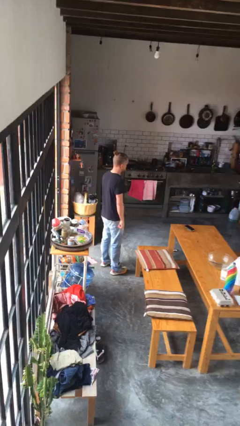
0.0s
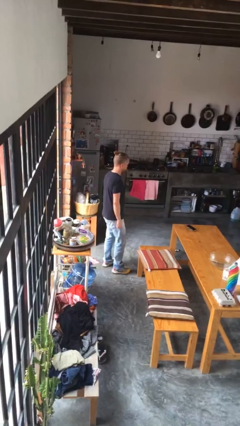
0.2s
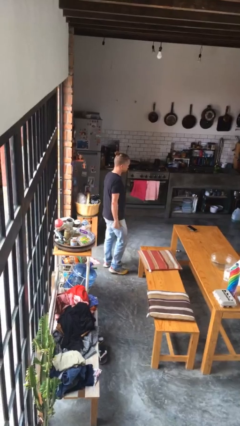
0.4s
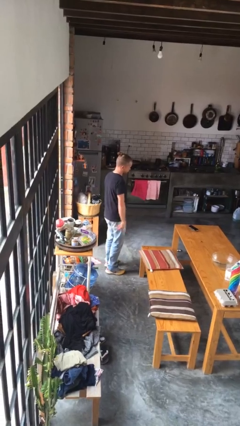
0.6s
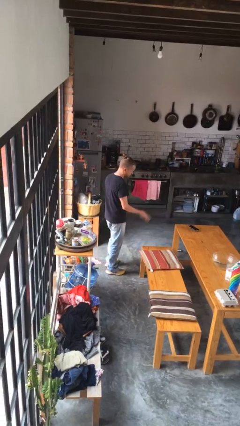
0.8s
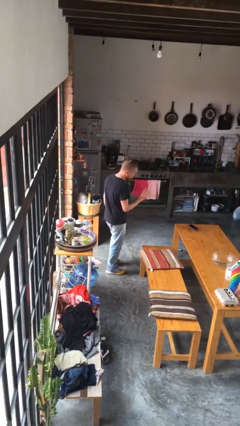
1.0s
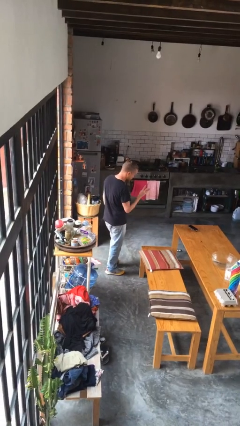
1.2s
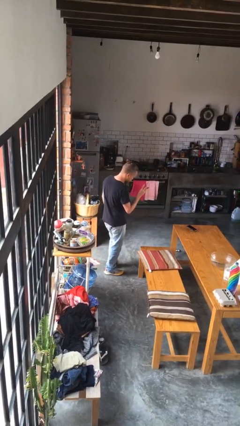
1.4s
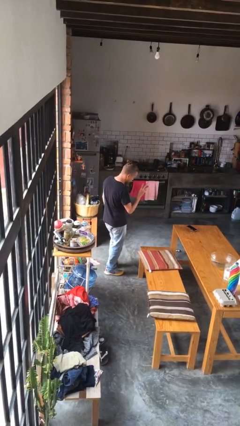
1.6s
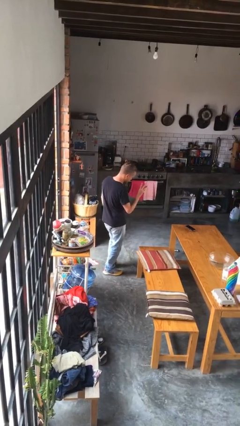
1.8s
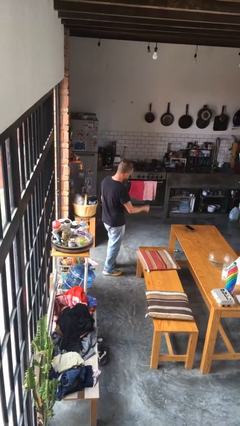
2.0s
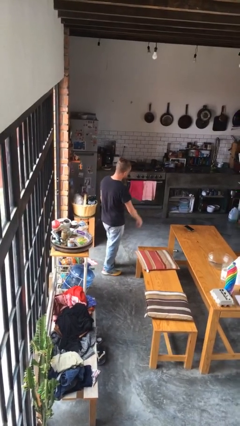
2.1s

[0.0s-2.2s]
person gestures number three

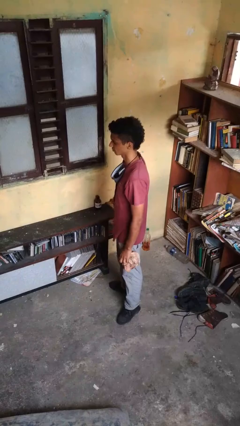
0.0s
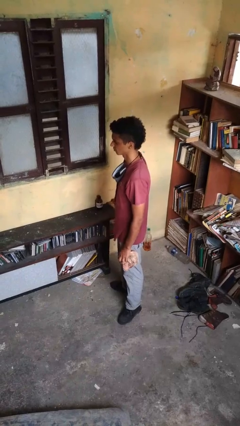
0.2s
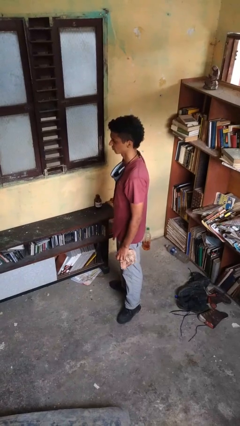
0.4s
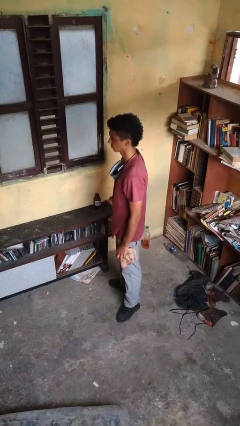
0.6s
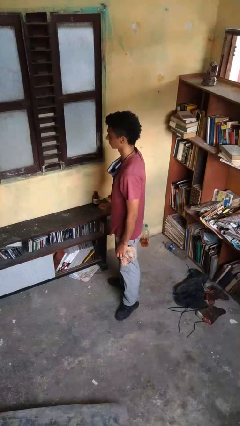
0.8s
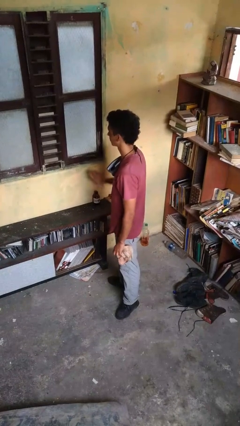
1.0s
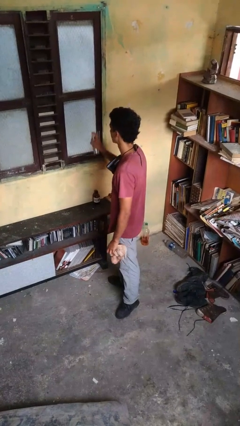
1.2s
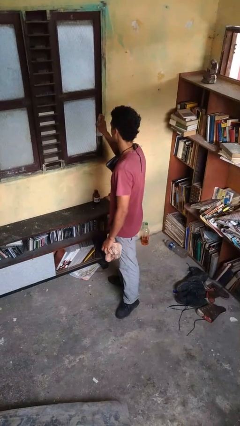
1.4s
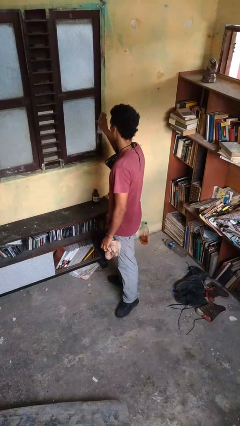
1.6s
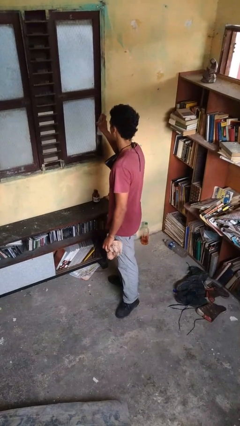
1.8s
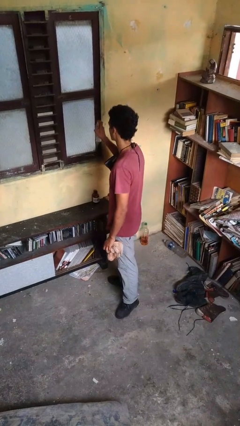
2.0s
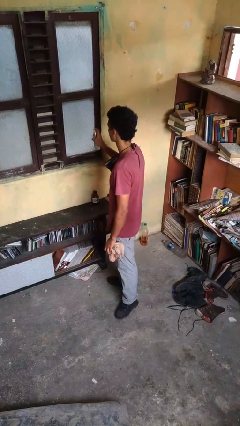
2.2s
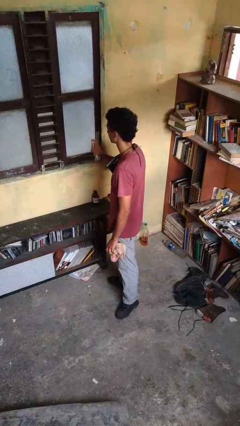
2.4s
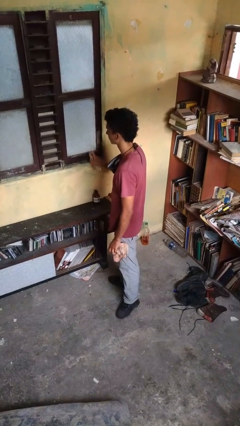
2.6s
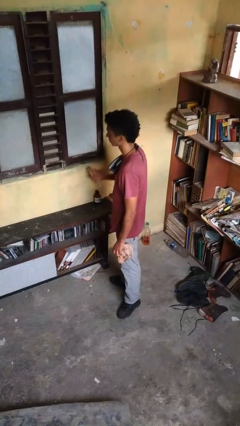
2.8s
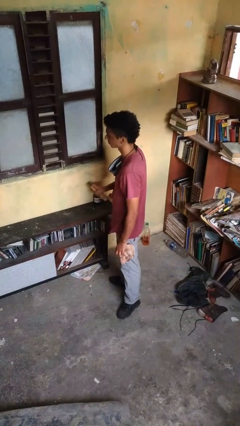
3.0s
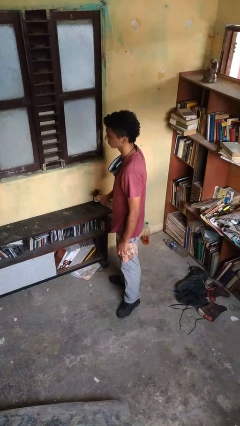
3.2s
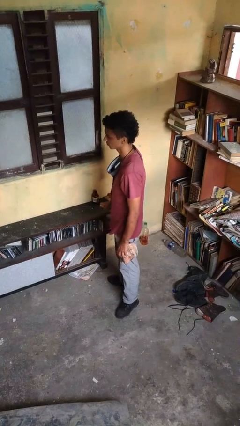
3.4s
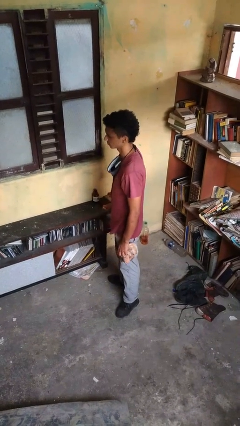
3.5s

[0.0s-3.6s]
person sprays from bottle

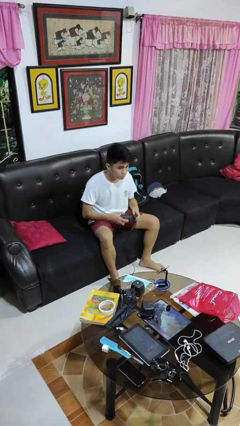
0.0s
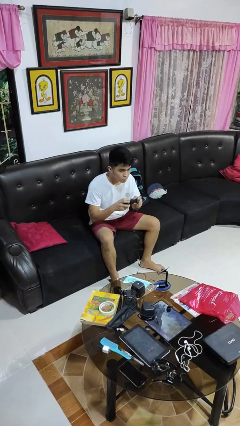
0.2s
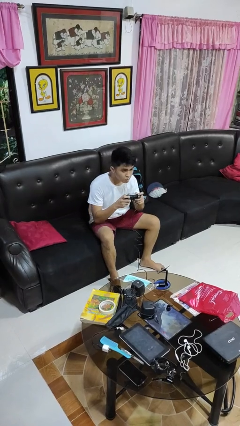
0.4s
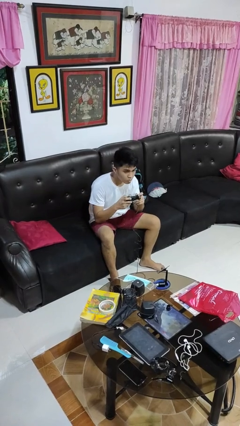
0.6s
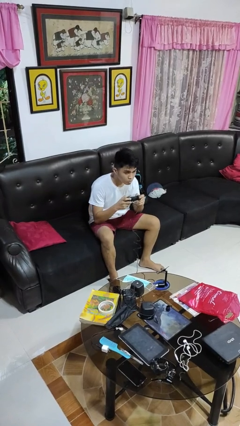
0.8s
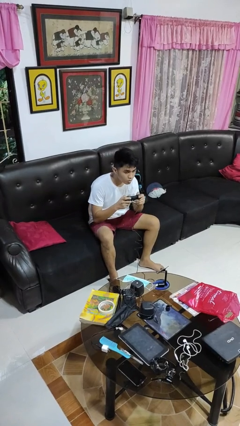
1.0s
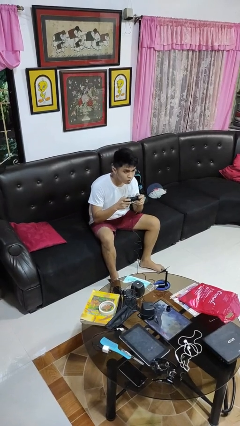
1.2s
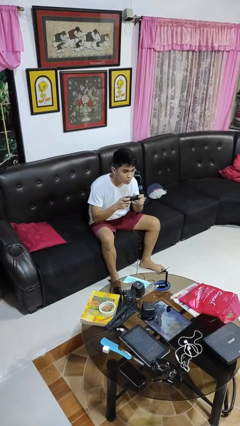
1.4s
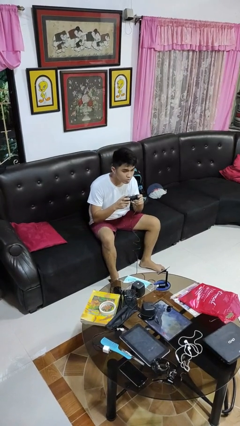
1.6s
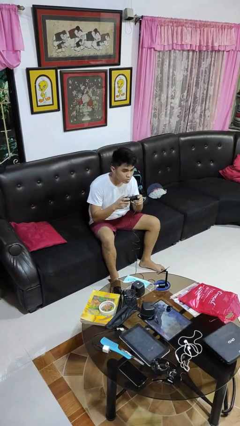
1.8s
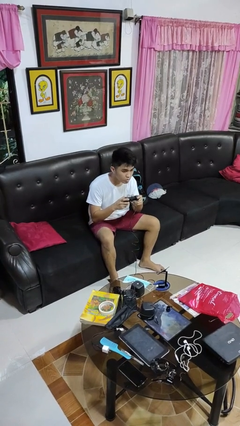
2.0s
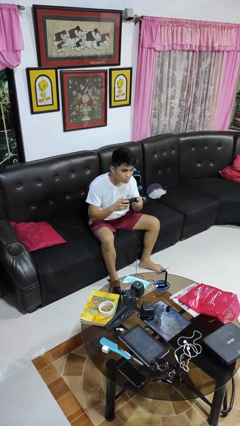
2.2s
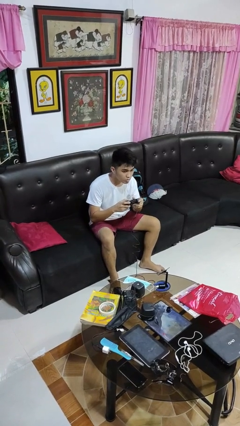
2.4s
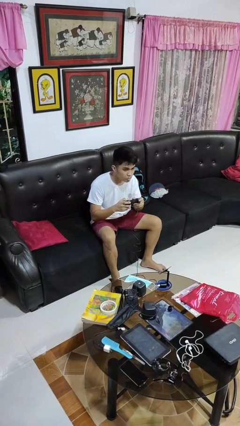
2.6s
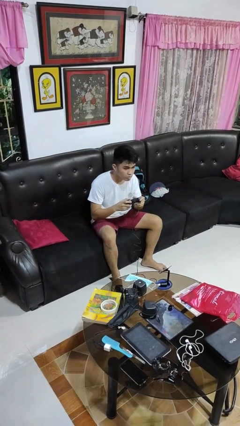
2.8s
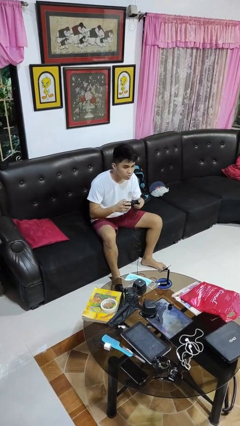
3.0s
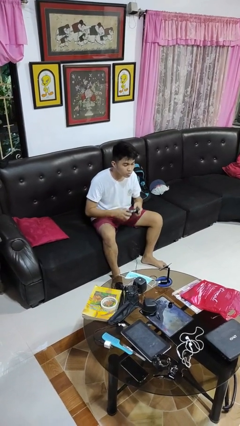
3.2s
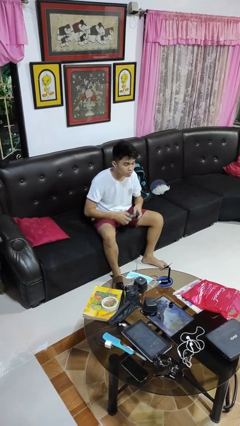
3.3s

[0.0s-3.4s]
person interacts with handheld game

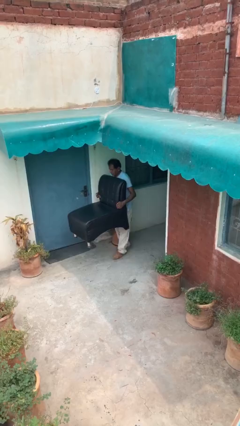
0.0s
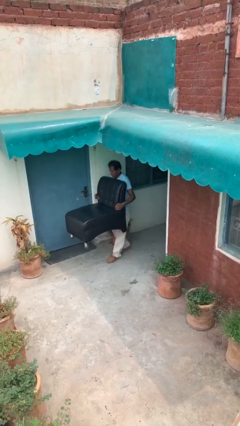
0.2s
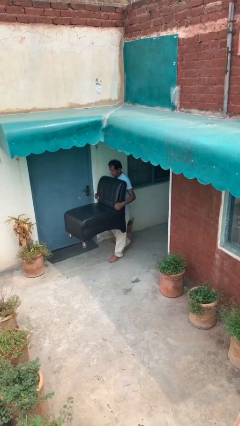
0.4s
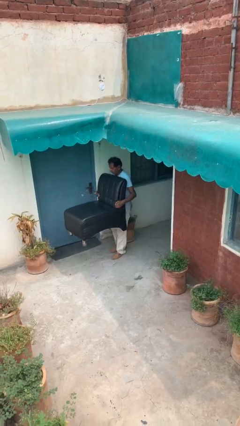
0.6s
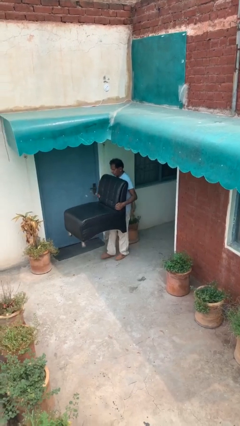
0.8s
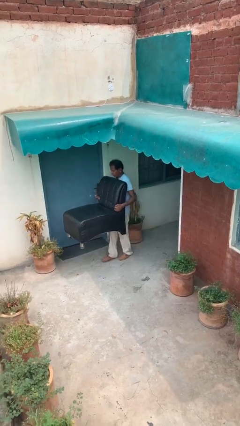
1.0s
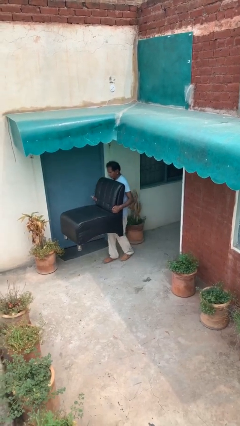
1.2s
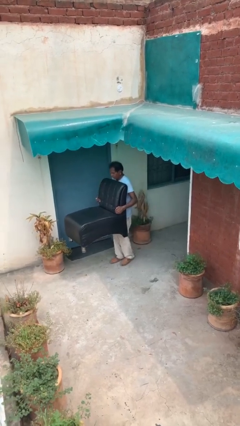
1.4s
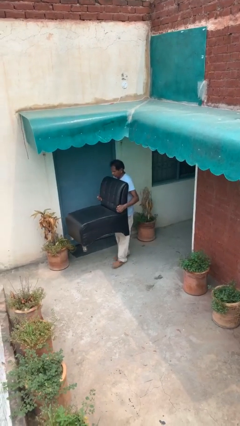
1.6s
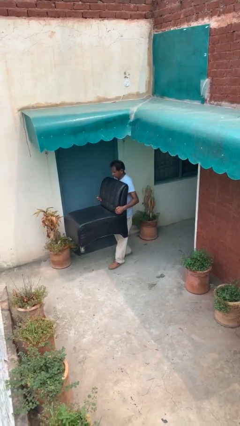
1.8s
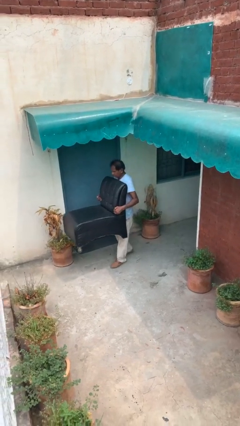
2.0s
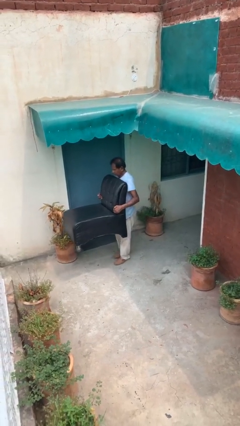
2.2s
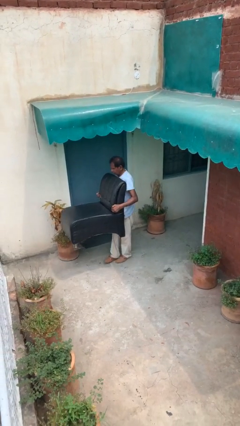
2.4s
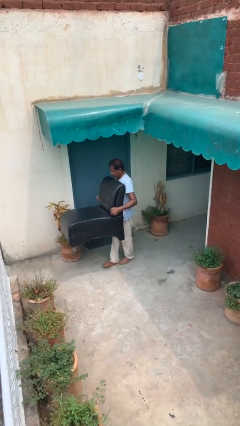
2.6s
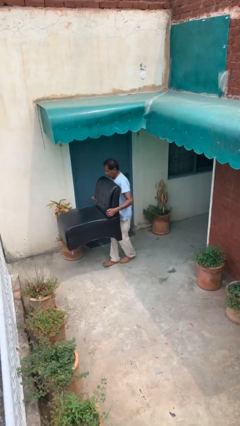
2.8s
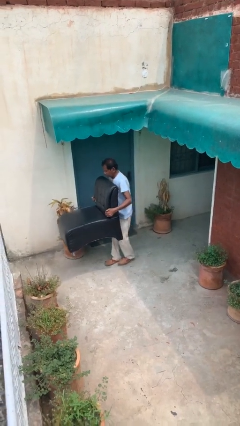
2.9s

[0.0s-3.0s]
person carries heavy object

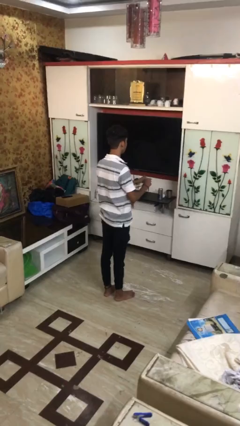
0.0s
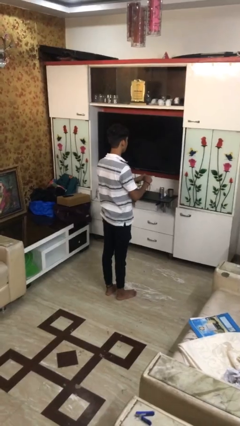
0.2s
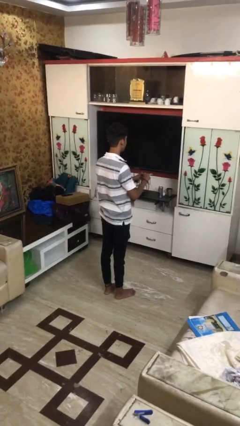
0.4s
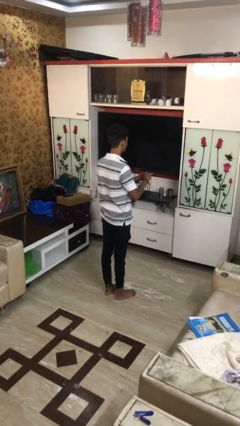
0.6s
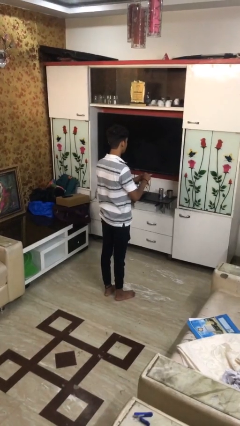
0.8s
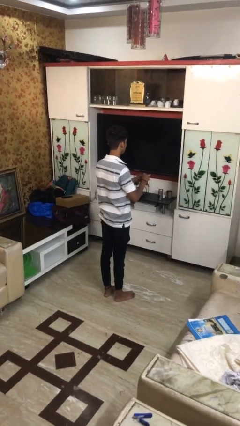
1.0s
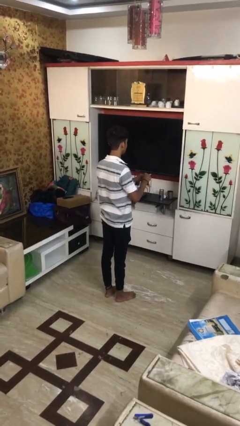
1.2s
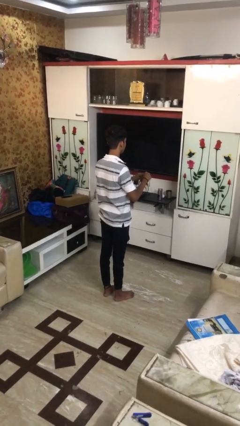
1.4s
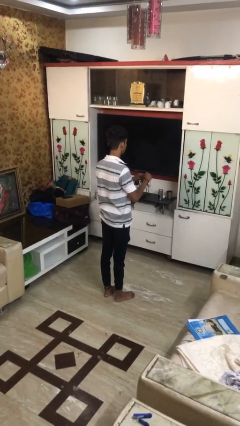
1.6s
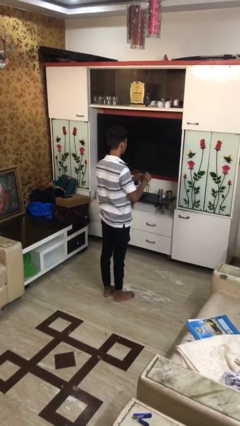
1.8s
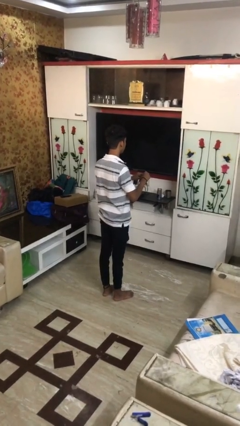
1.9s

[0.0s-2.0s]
person files fingernails

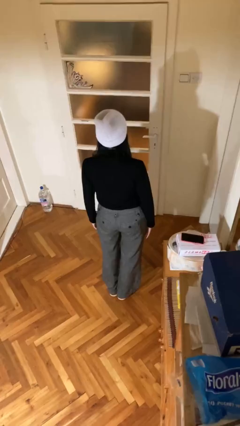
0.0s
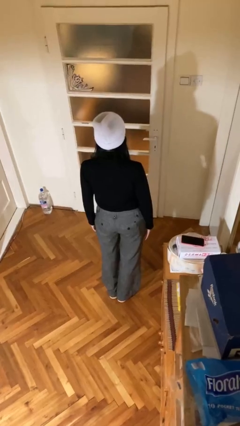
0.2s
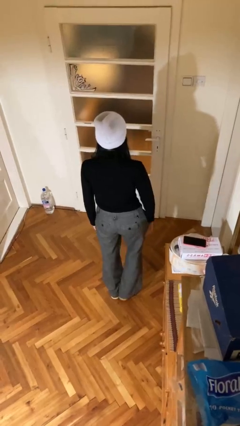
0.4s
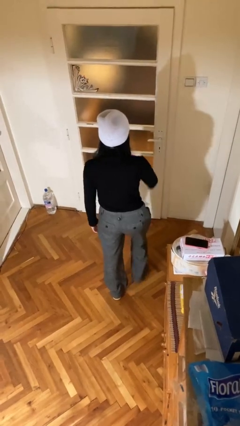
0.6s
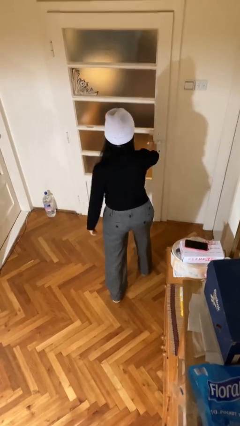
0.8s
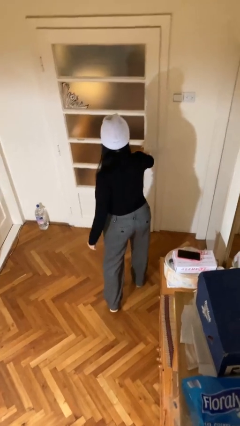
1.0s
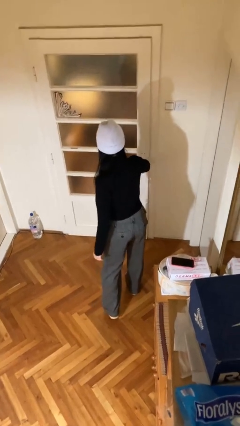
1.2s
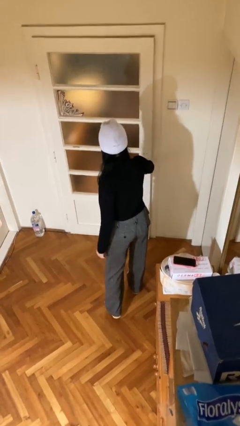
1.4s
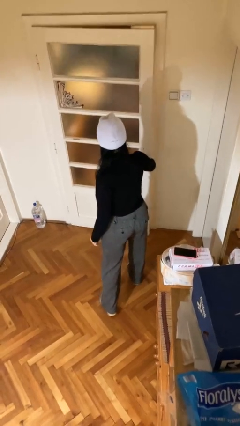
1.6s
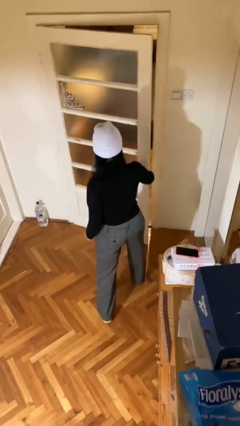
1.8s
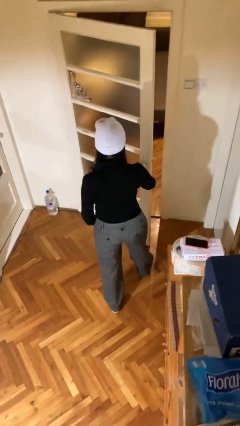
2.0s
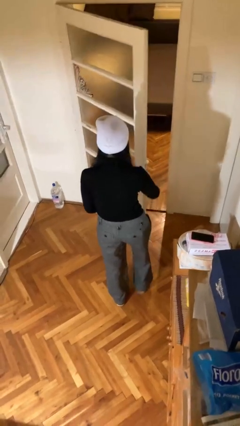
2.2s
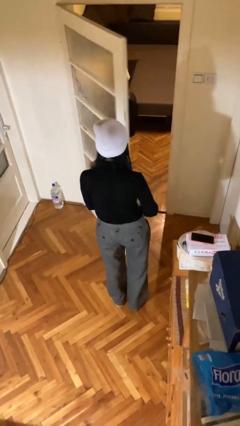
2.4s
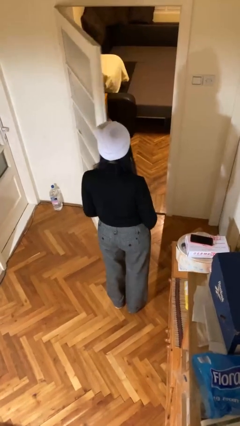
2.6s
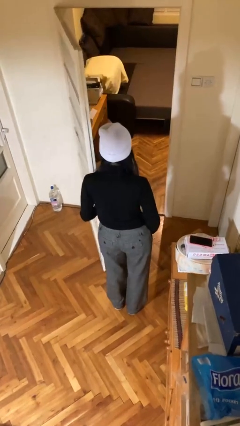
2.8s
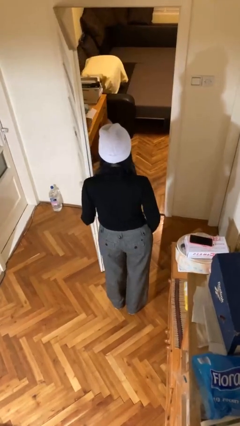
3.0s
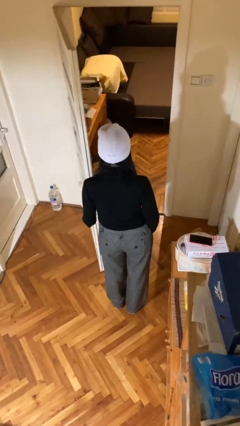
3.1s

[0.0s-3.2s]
person opens facility door
